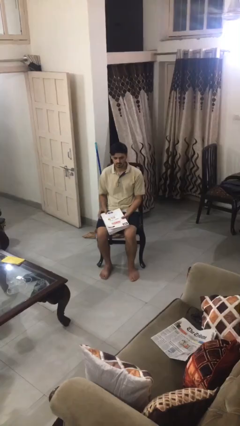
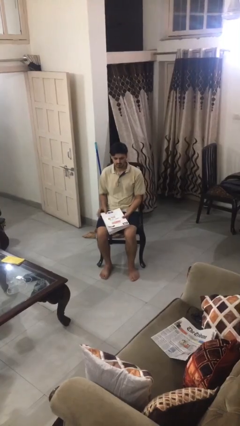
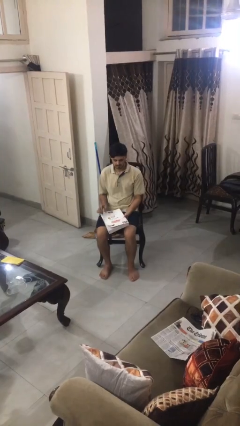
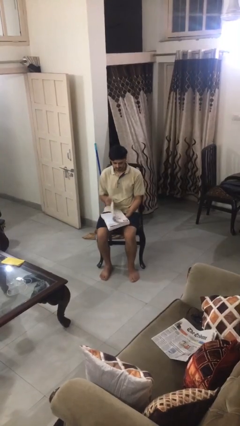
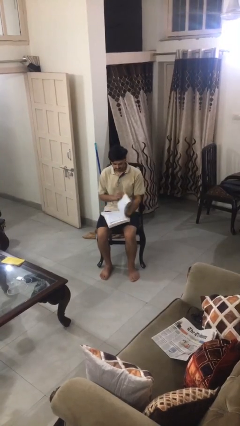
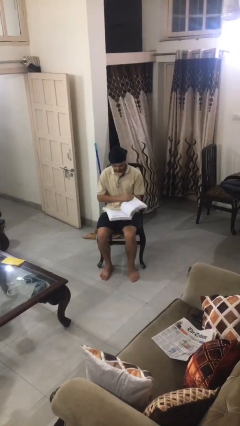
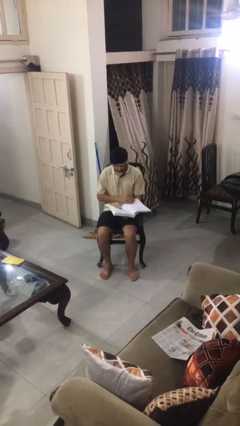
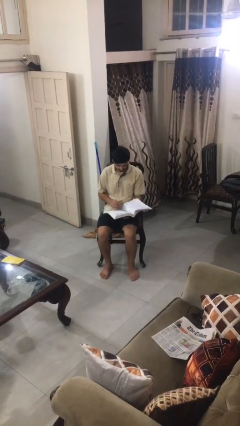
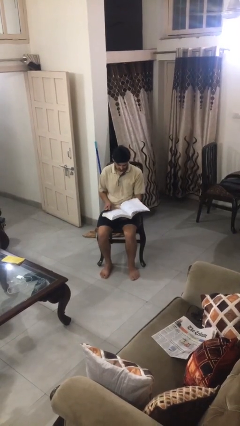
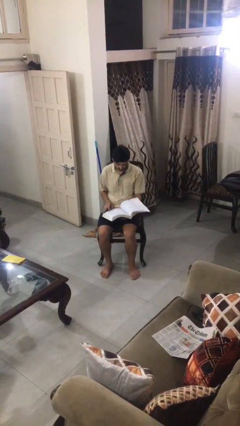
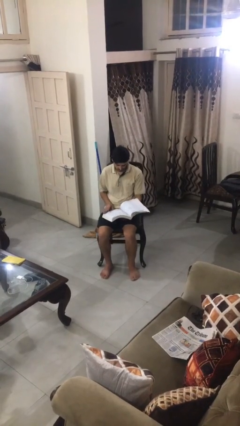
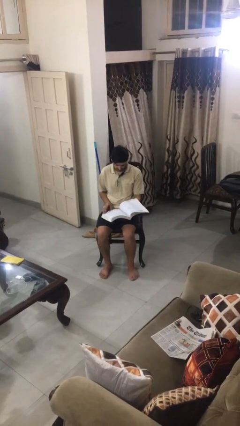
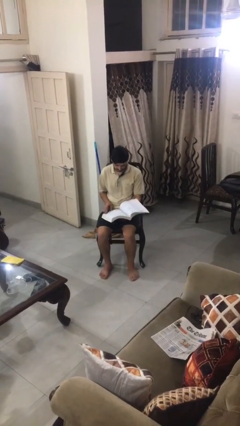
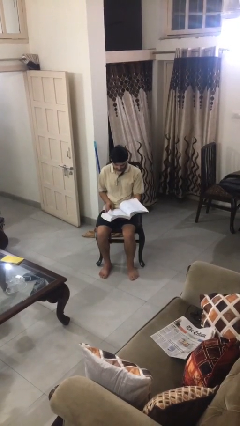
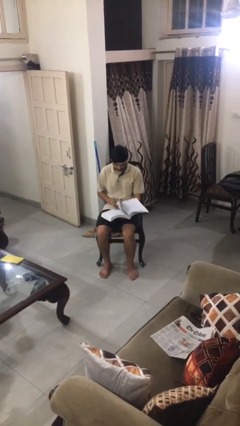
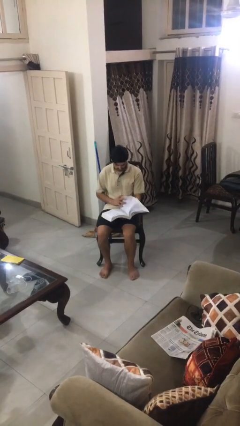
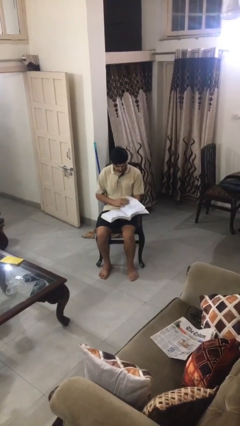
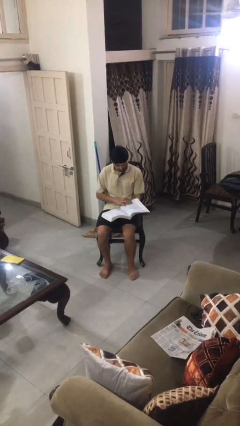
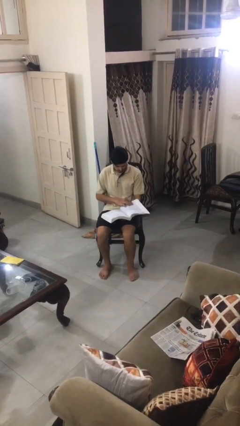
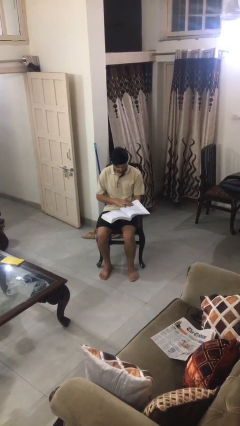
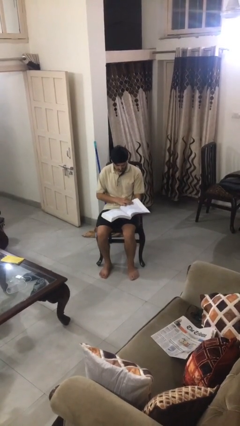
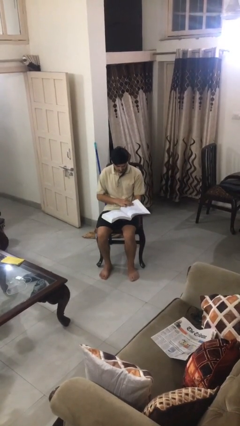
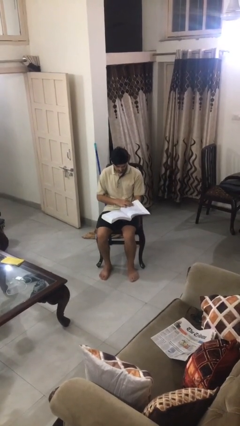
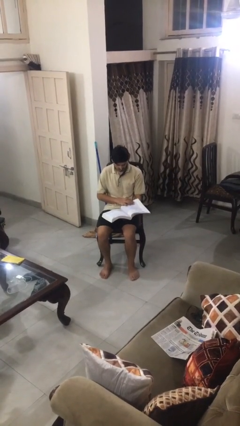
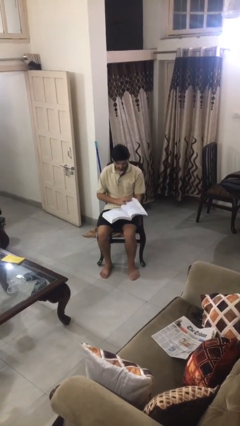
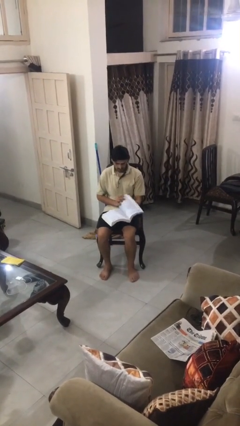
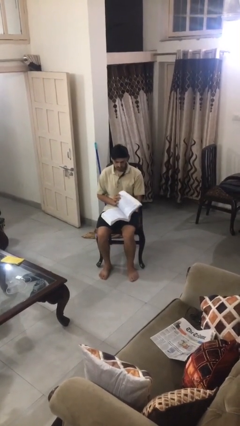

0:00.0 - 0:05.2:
person reads book

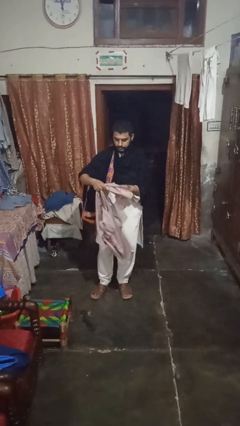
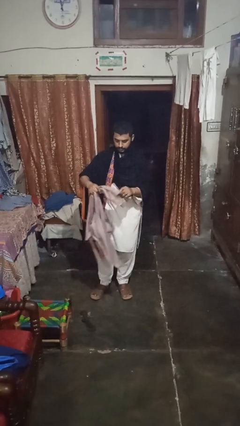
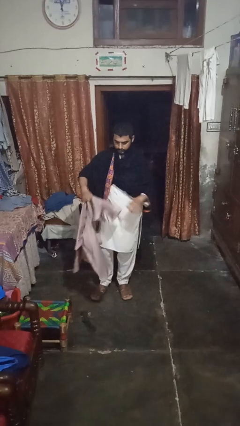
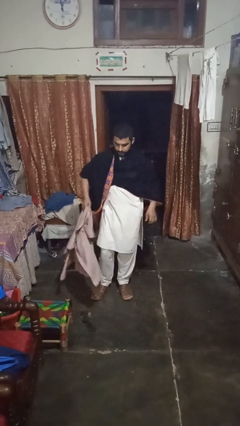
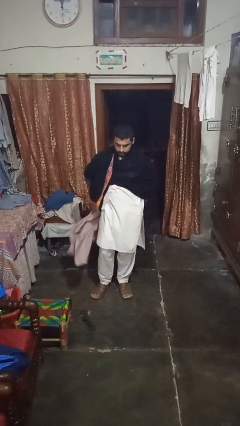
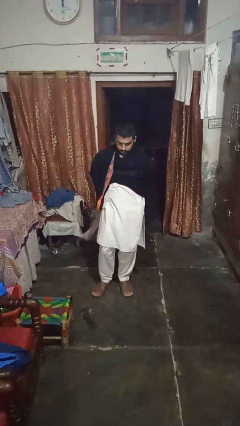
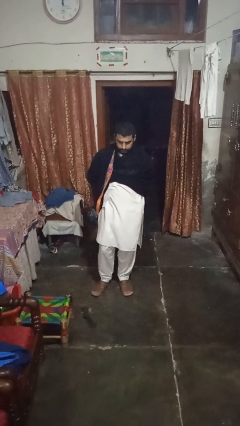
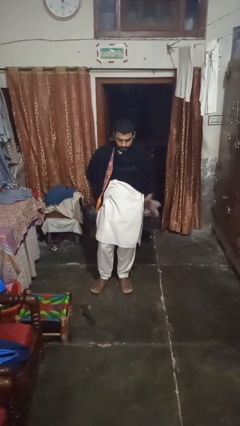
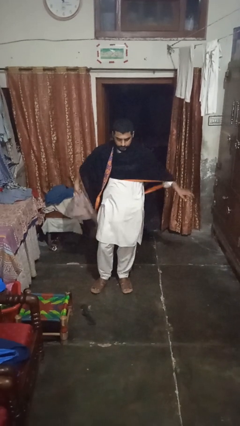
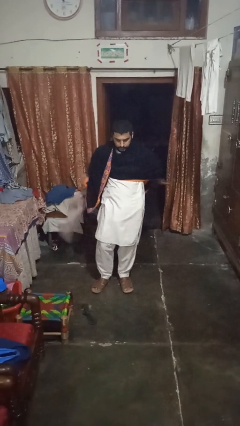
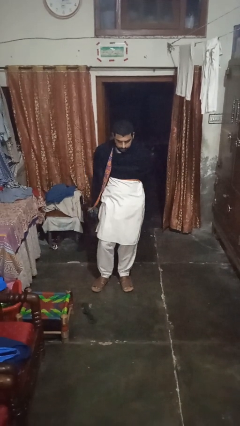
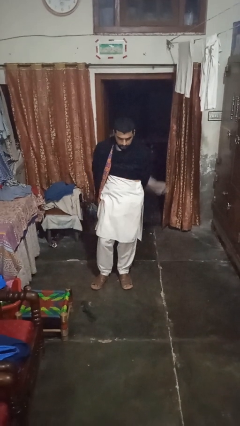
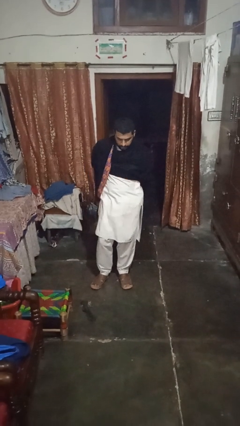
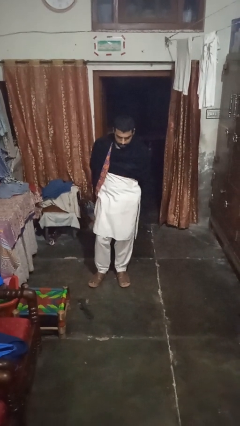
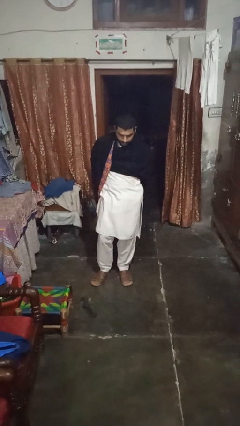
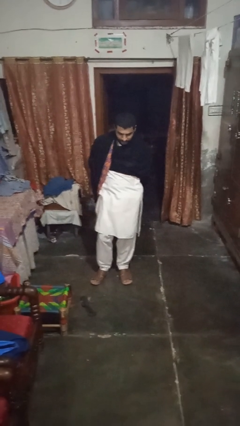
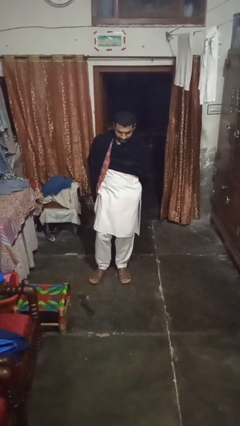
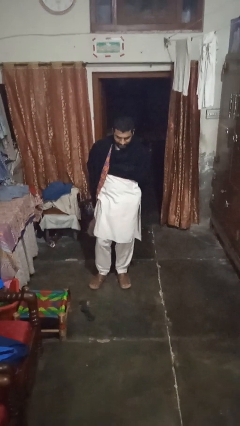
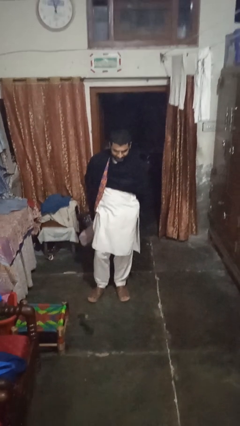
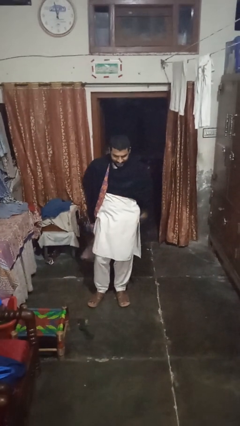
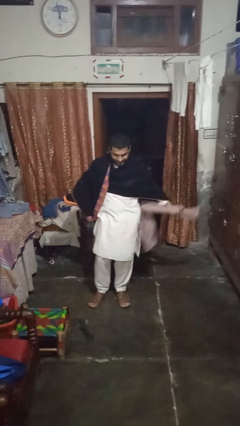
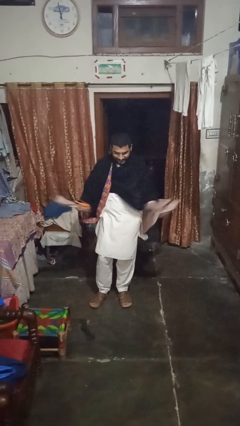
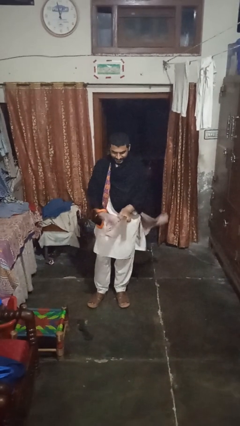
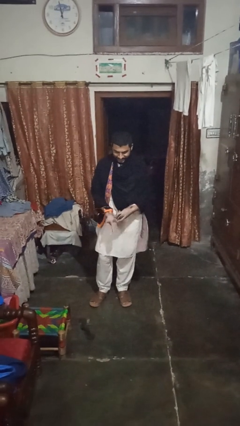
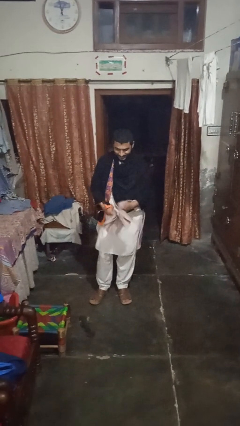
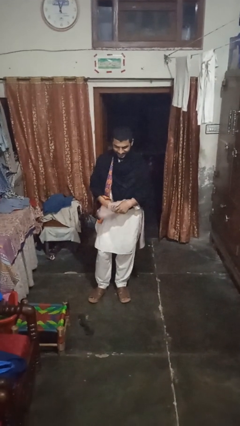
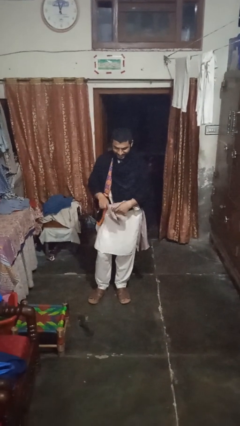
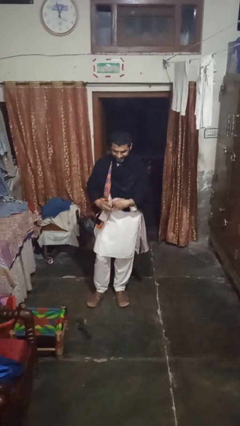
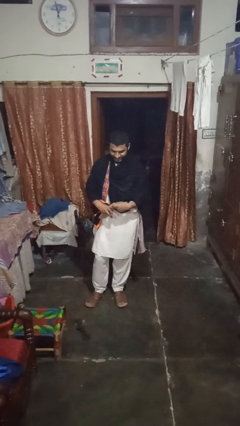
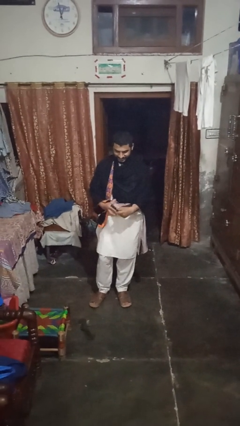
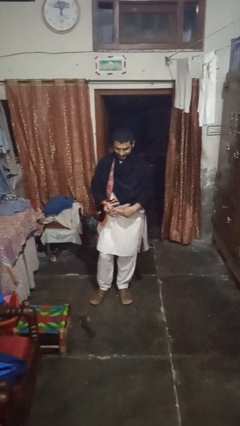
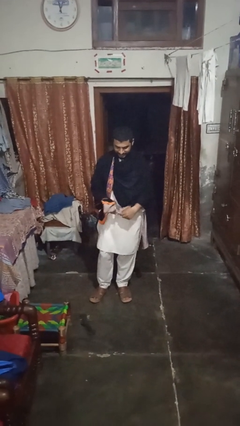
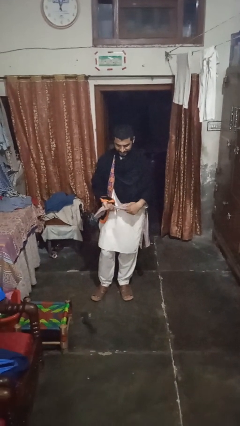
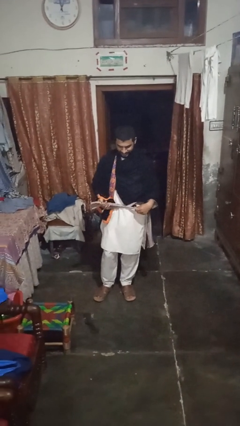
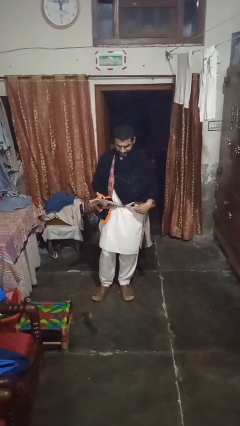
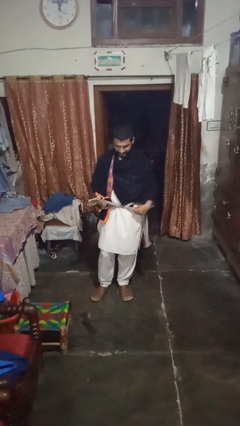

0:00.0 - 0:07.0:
person ties jacket around waist

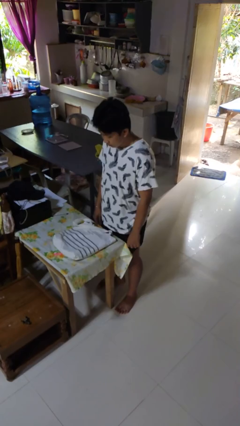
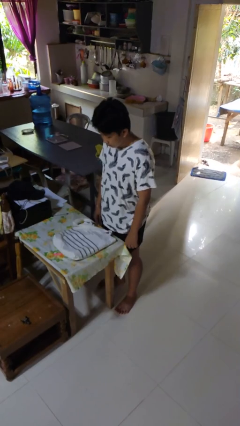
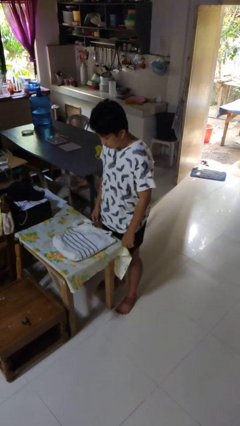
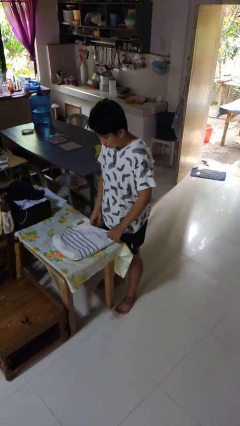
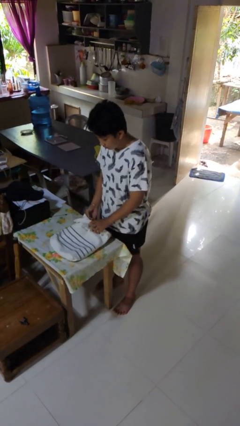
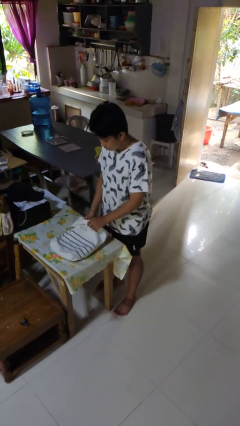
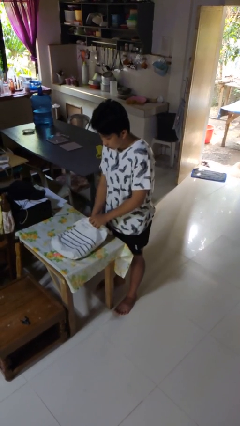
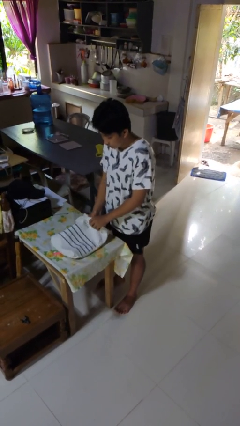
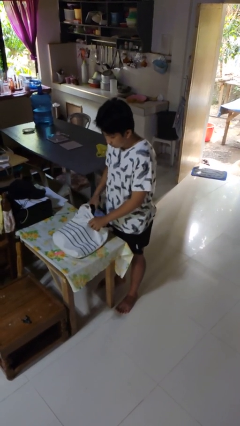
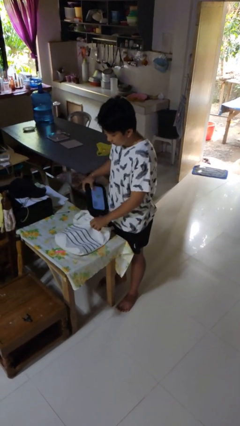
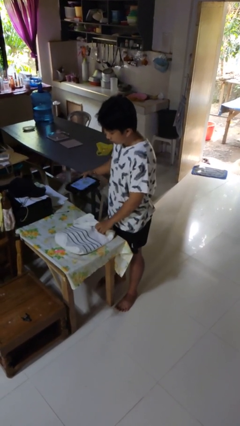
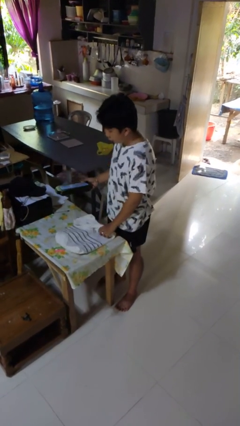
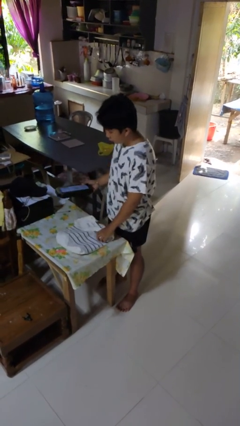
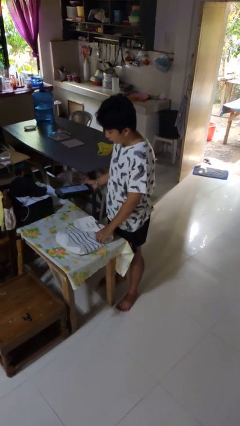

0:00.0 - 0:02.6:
person takes object from bag

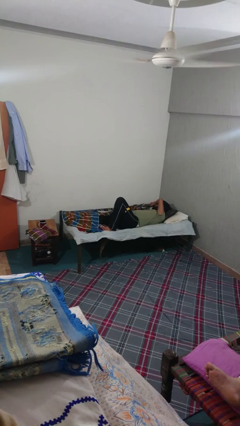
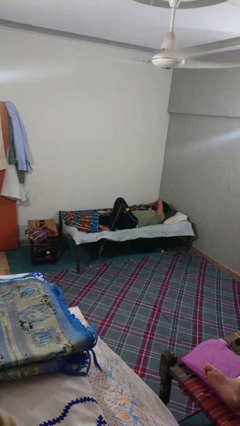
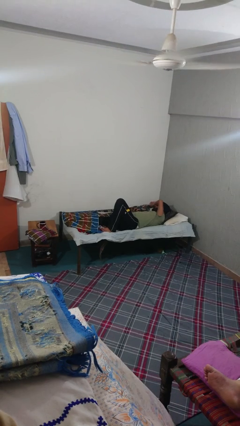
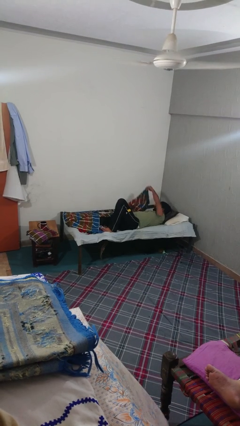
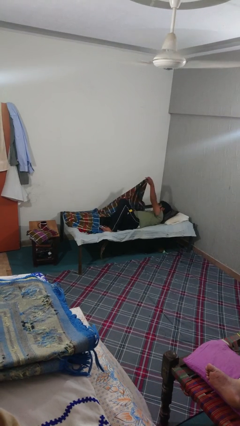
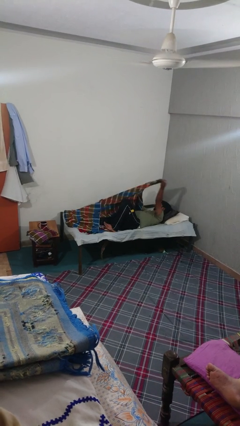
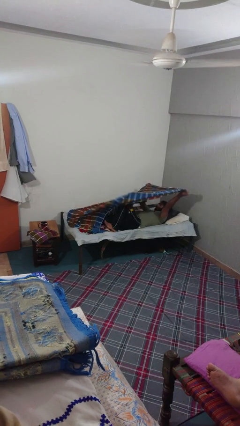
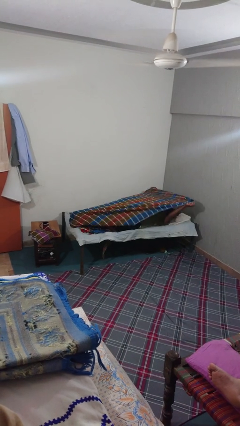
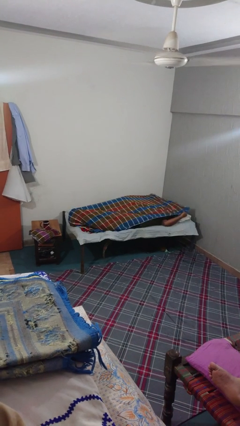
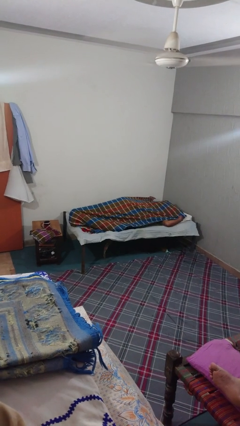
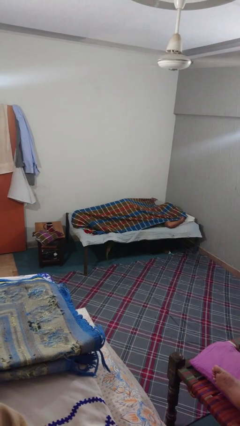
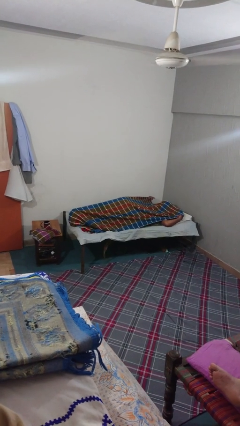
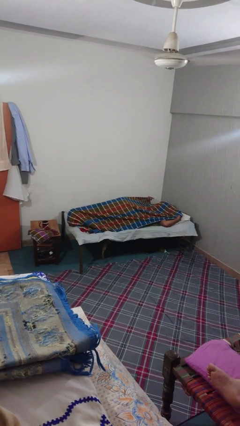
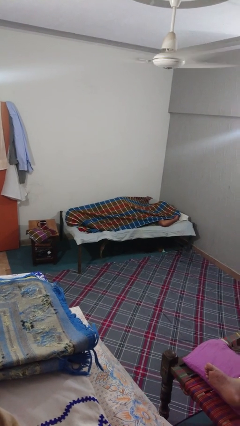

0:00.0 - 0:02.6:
person covers with bedsheets
